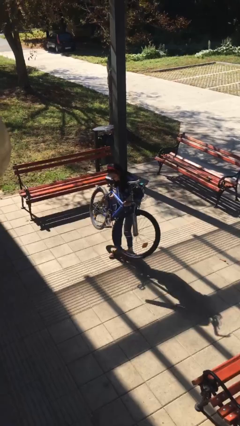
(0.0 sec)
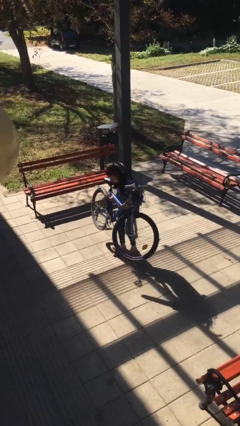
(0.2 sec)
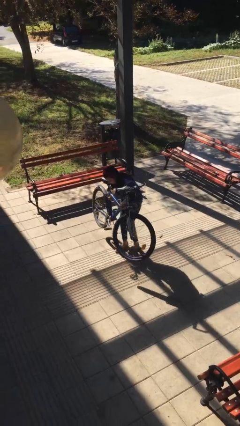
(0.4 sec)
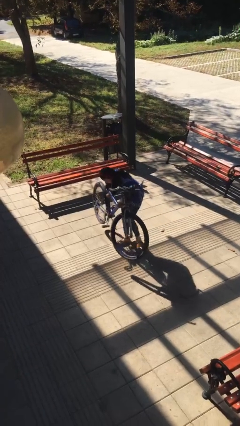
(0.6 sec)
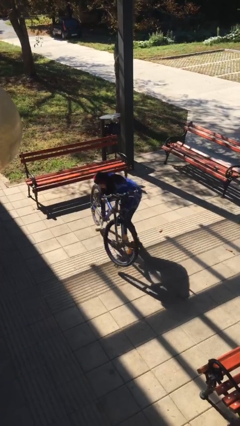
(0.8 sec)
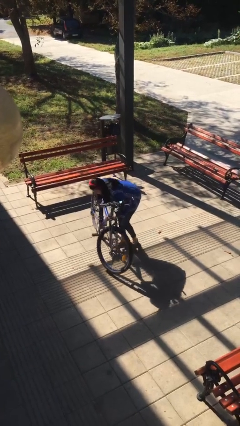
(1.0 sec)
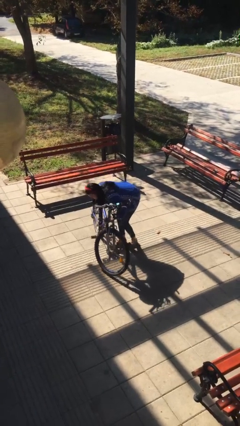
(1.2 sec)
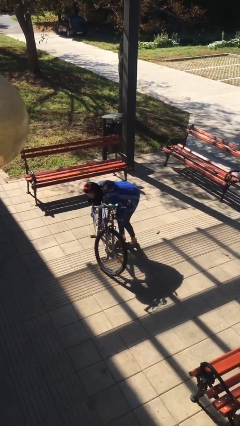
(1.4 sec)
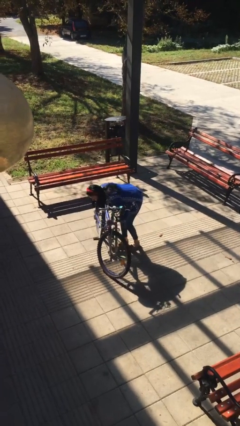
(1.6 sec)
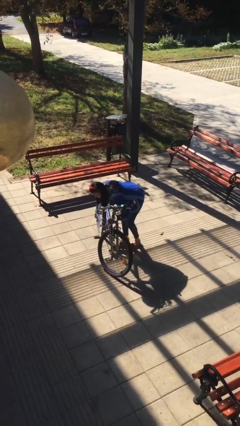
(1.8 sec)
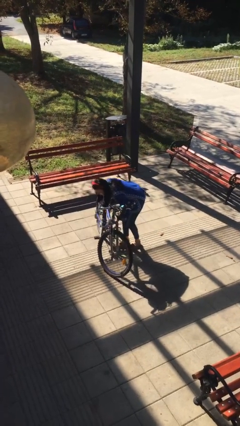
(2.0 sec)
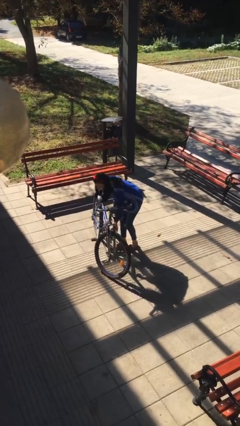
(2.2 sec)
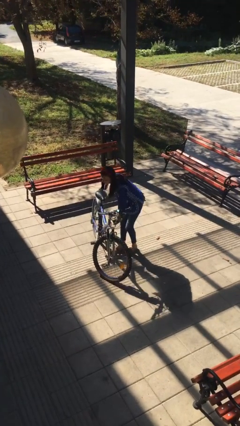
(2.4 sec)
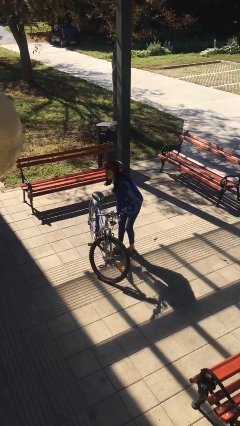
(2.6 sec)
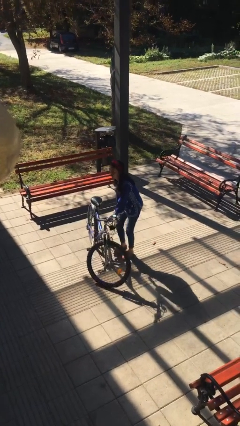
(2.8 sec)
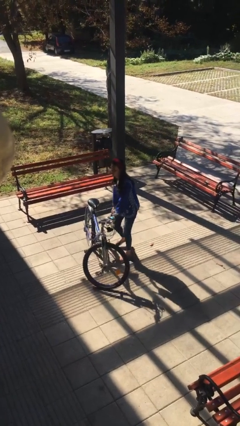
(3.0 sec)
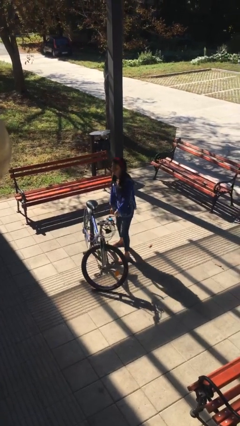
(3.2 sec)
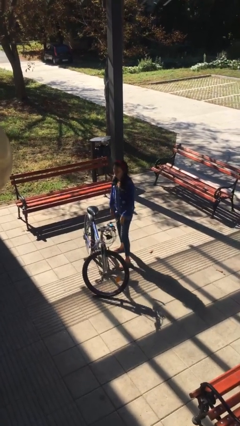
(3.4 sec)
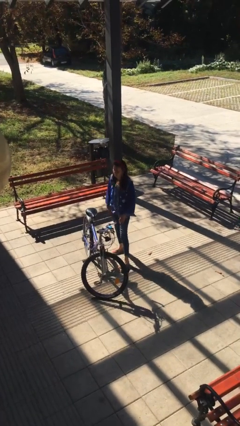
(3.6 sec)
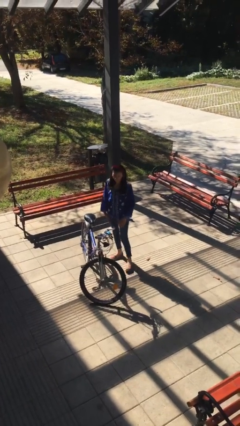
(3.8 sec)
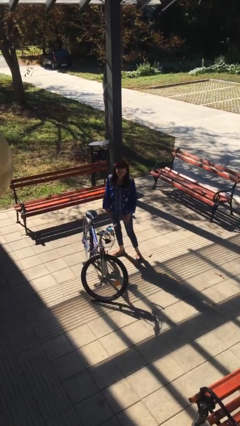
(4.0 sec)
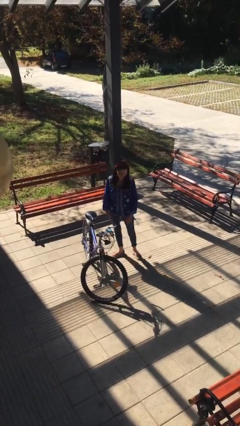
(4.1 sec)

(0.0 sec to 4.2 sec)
person puts down object on floor

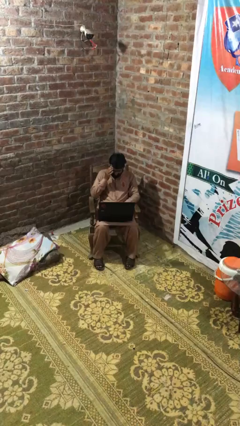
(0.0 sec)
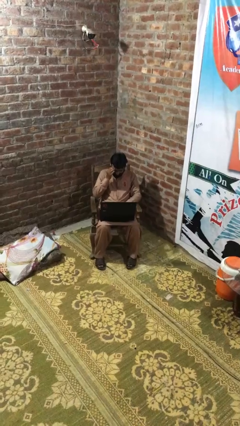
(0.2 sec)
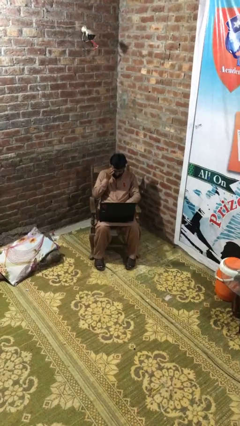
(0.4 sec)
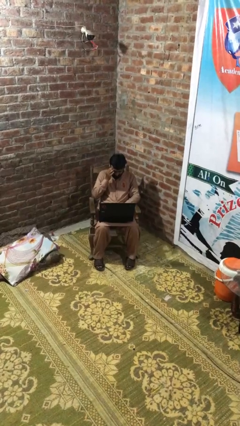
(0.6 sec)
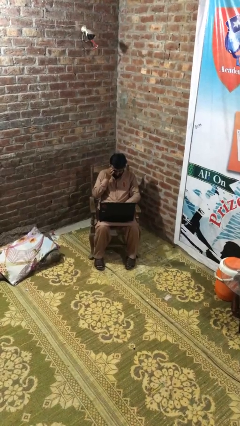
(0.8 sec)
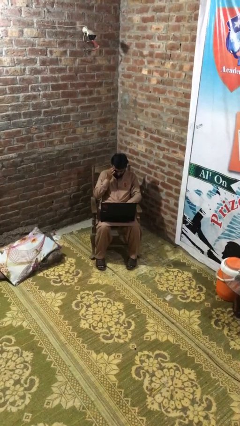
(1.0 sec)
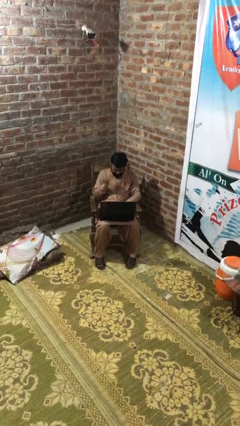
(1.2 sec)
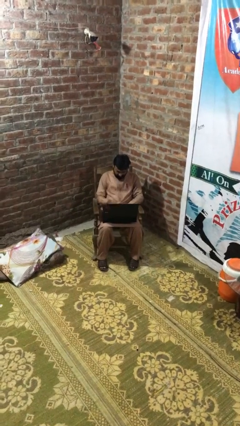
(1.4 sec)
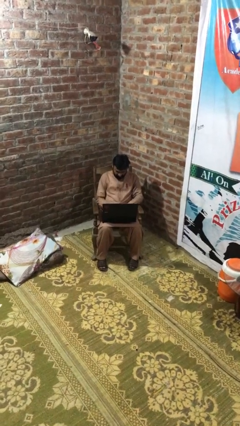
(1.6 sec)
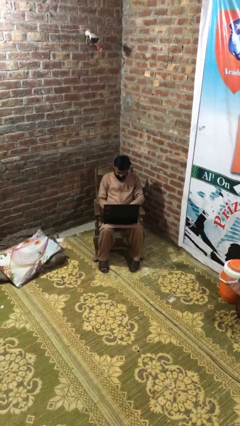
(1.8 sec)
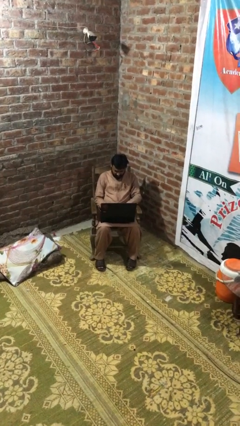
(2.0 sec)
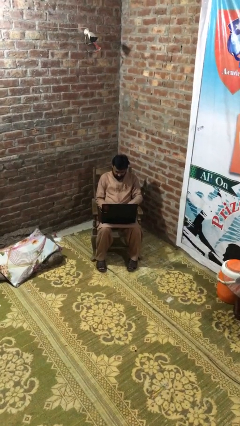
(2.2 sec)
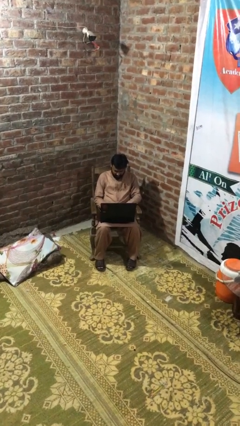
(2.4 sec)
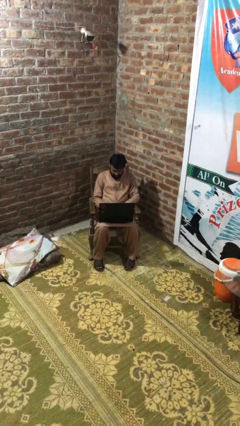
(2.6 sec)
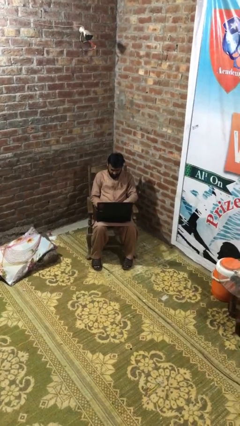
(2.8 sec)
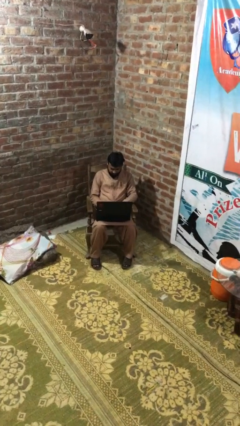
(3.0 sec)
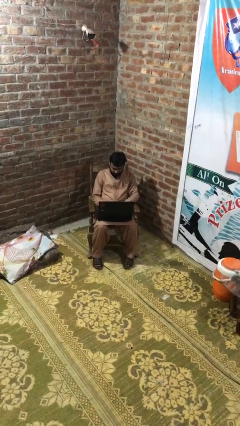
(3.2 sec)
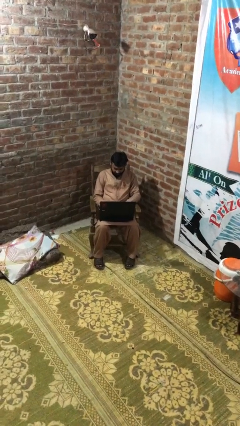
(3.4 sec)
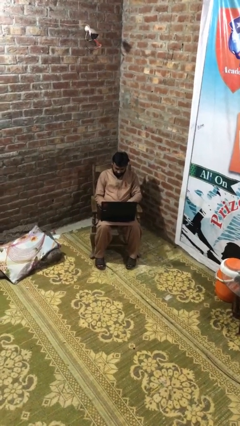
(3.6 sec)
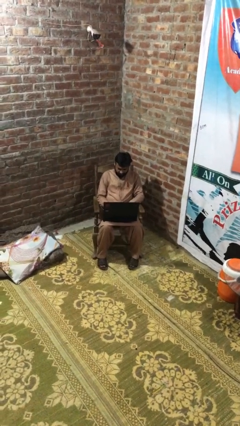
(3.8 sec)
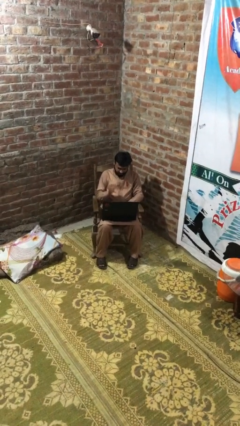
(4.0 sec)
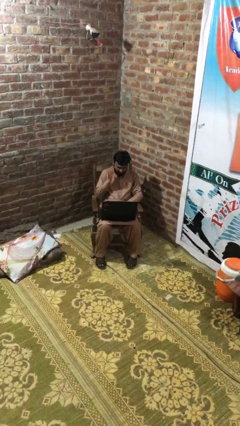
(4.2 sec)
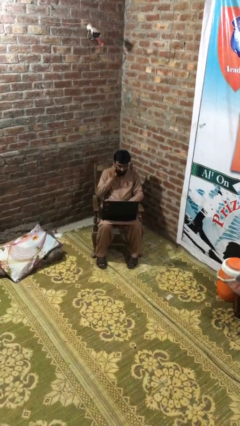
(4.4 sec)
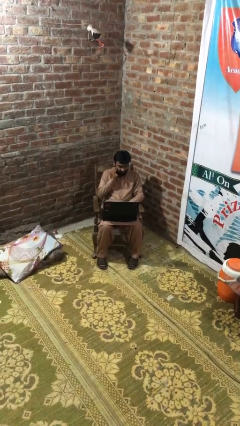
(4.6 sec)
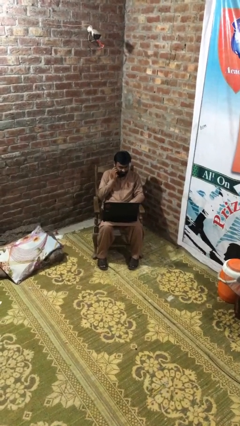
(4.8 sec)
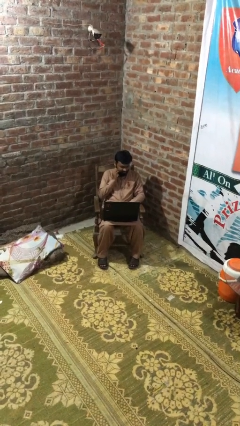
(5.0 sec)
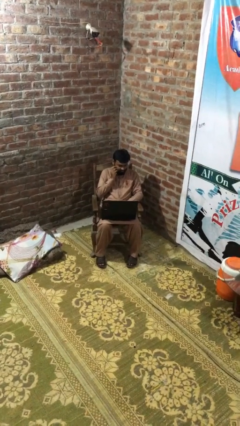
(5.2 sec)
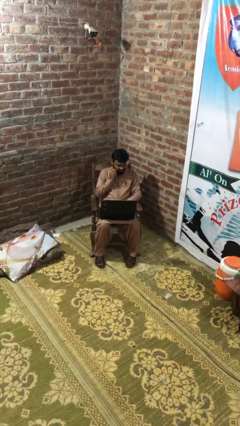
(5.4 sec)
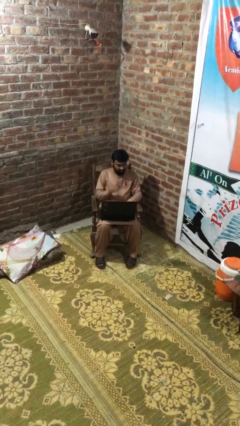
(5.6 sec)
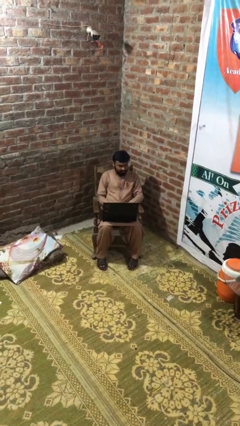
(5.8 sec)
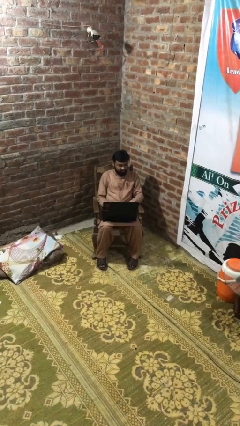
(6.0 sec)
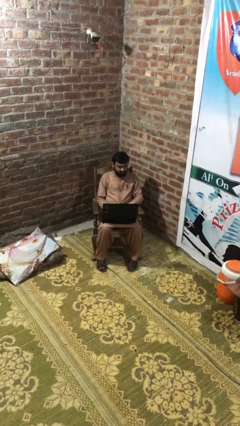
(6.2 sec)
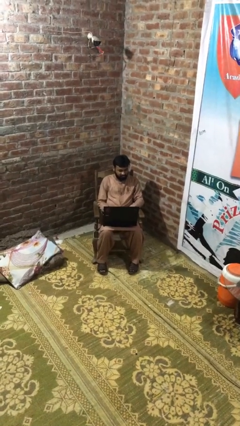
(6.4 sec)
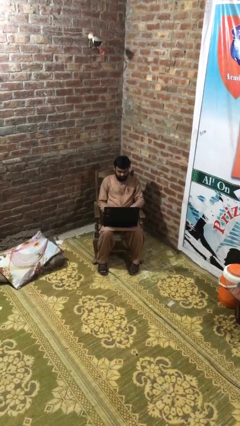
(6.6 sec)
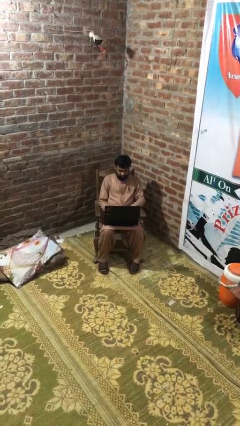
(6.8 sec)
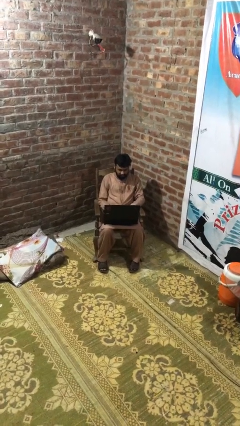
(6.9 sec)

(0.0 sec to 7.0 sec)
person interacts with laptop

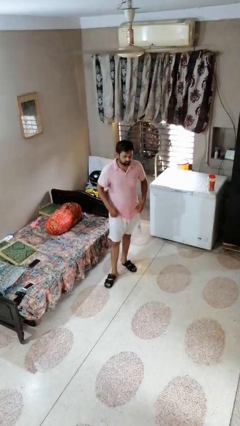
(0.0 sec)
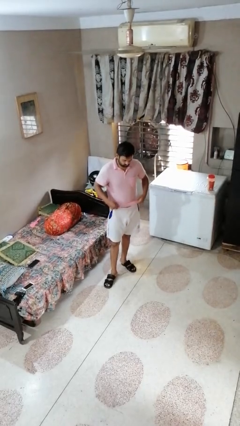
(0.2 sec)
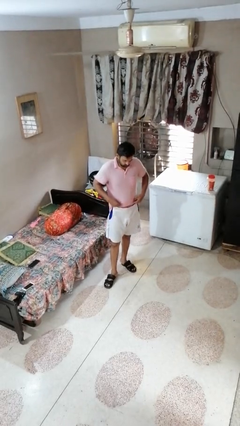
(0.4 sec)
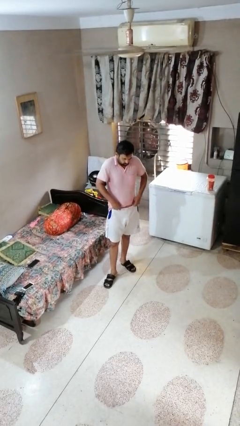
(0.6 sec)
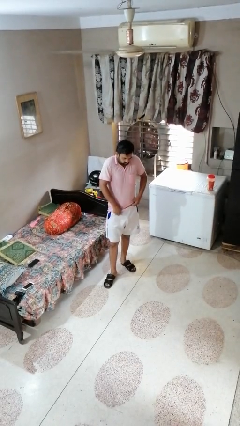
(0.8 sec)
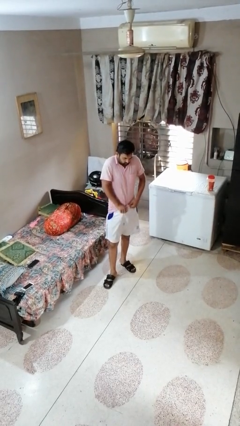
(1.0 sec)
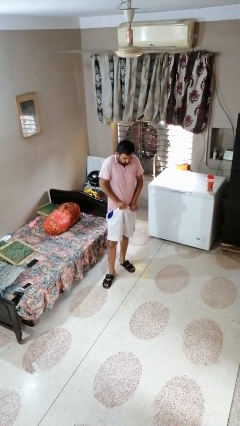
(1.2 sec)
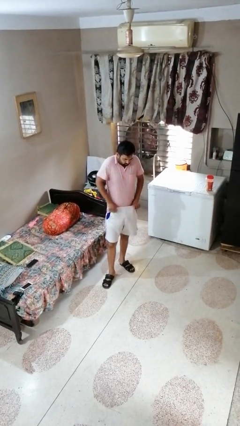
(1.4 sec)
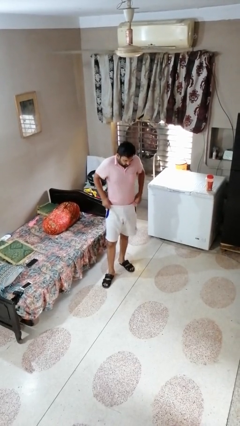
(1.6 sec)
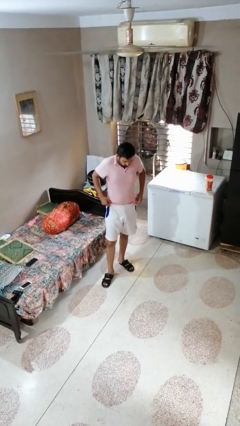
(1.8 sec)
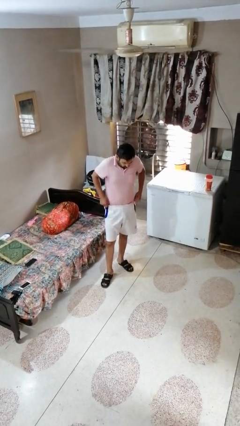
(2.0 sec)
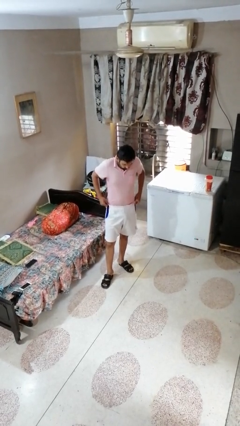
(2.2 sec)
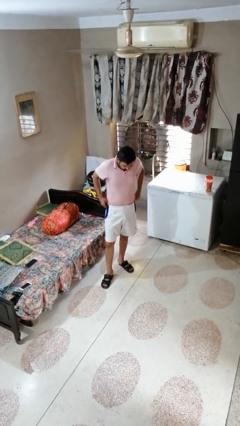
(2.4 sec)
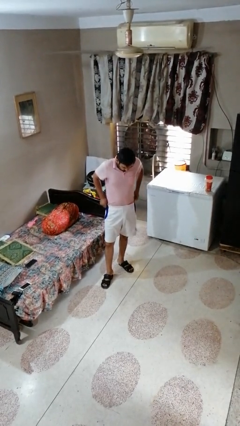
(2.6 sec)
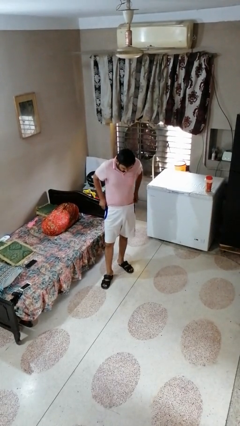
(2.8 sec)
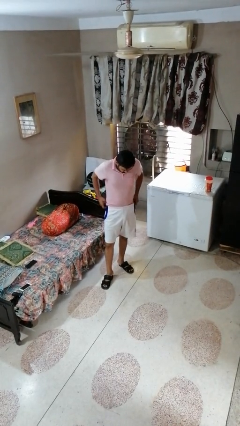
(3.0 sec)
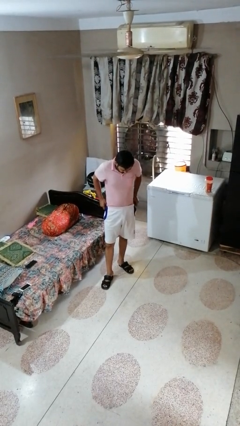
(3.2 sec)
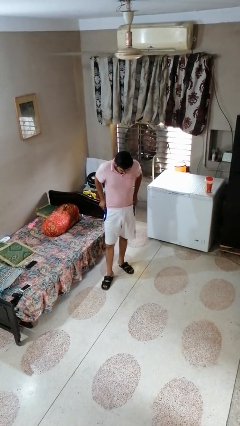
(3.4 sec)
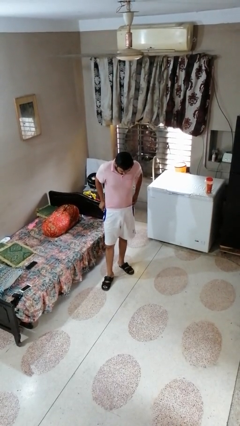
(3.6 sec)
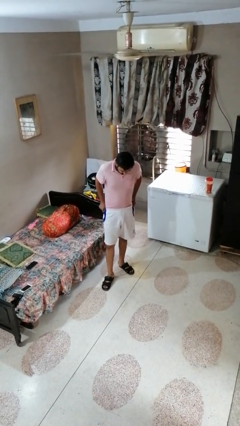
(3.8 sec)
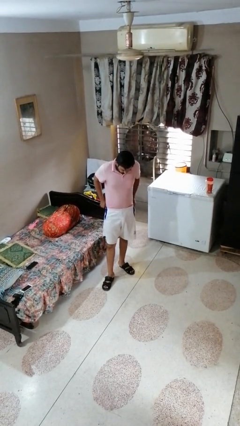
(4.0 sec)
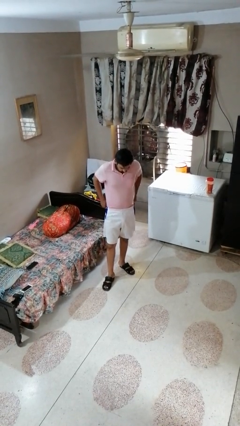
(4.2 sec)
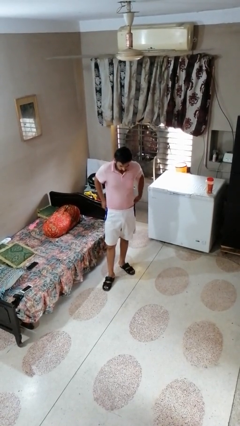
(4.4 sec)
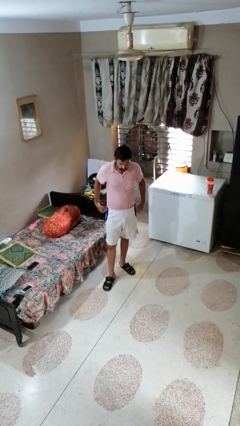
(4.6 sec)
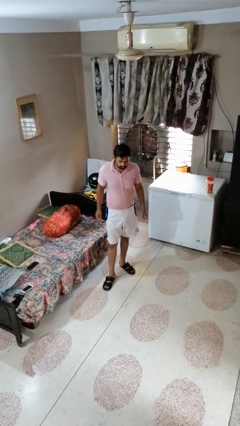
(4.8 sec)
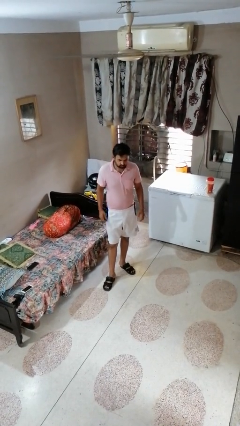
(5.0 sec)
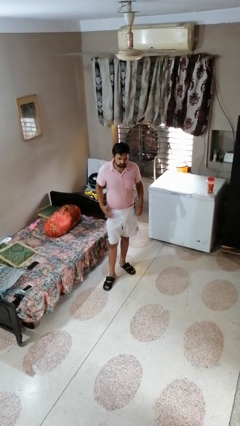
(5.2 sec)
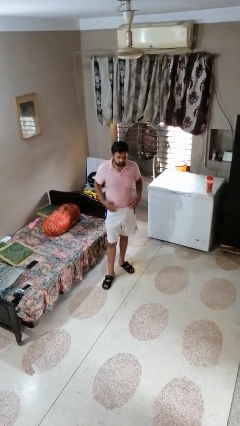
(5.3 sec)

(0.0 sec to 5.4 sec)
person tucks in shirt

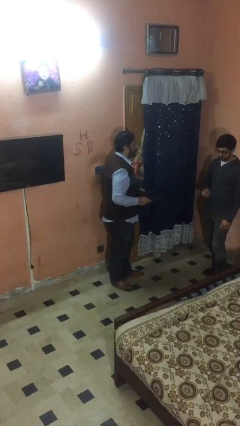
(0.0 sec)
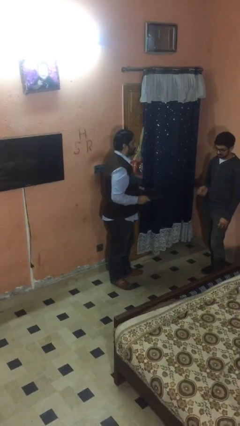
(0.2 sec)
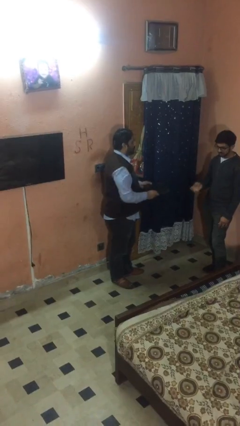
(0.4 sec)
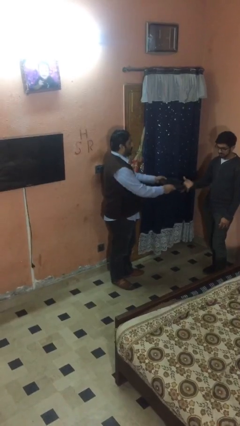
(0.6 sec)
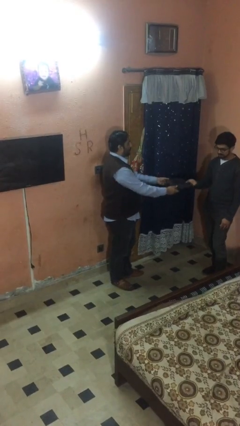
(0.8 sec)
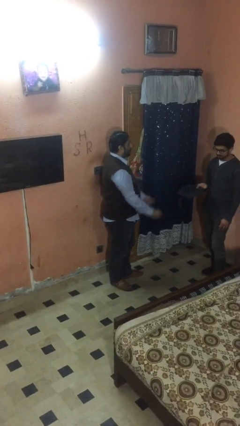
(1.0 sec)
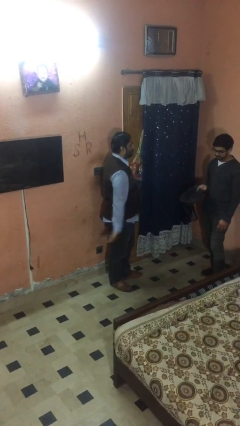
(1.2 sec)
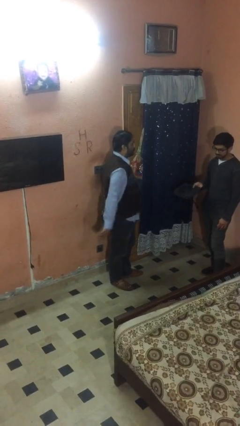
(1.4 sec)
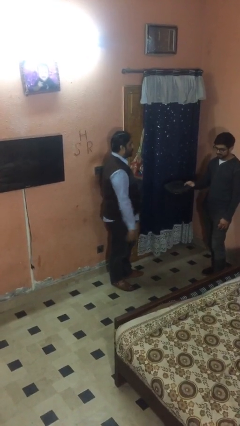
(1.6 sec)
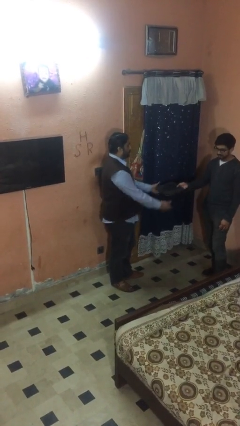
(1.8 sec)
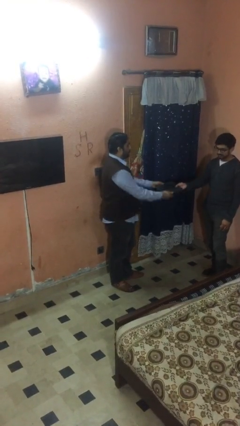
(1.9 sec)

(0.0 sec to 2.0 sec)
person transfers object to person
